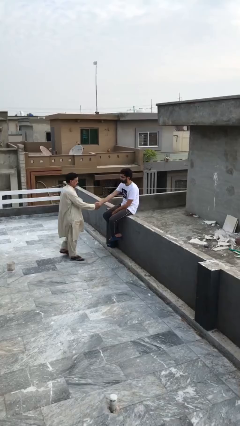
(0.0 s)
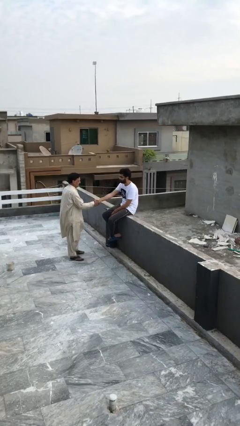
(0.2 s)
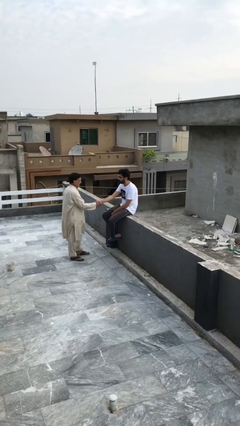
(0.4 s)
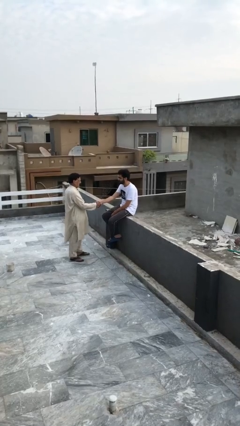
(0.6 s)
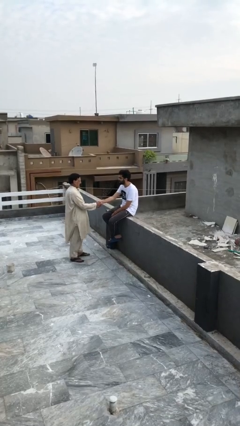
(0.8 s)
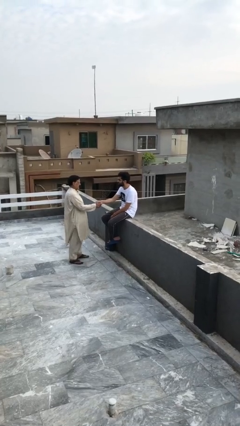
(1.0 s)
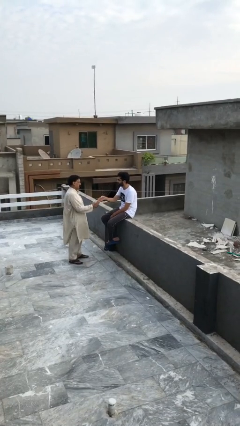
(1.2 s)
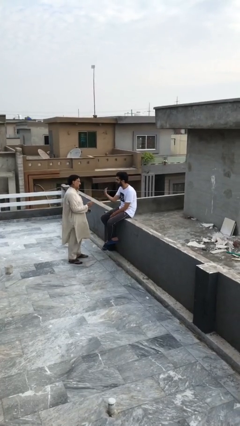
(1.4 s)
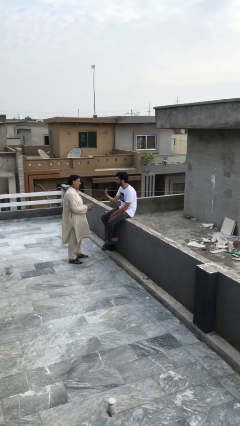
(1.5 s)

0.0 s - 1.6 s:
person shakes hand

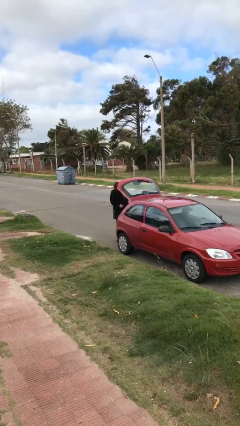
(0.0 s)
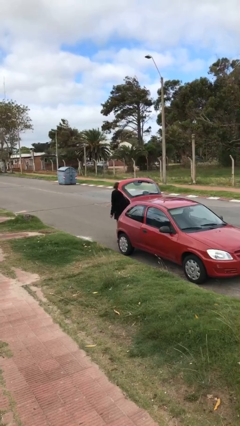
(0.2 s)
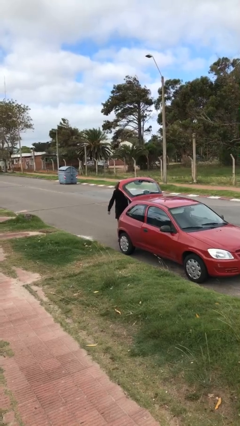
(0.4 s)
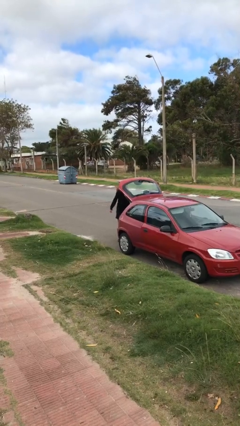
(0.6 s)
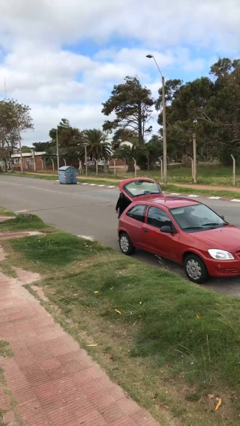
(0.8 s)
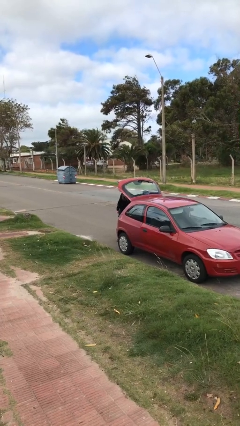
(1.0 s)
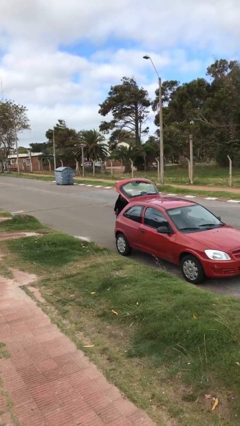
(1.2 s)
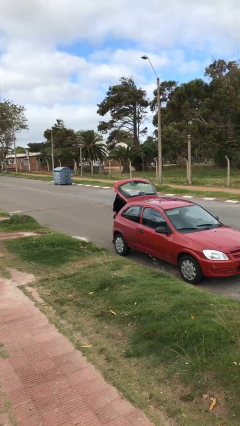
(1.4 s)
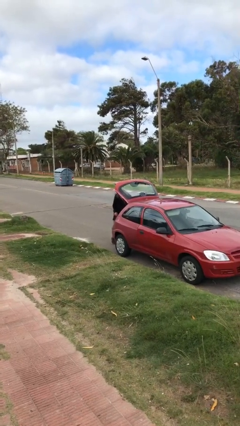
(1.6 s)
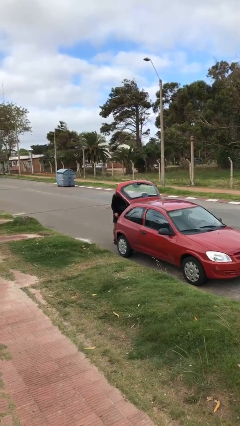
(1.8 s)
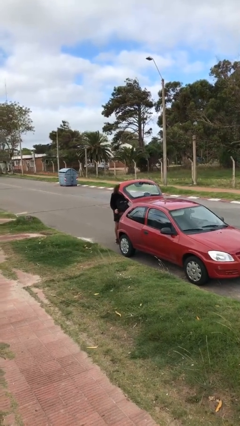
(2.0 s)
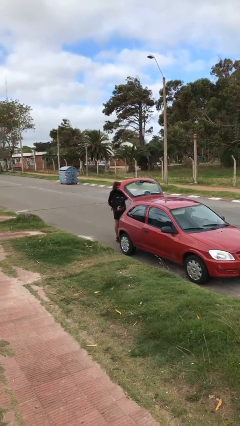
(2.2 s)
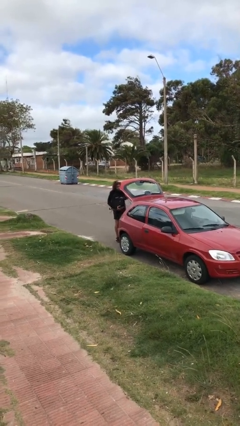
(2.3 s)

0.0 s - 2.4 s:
person unloads car

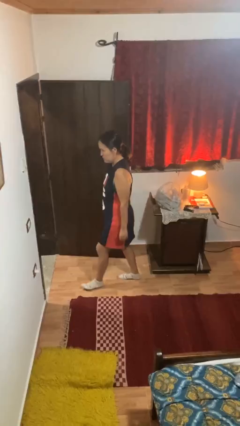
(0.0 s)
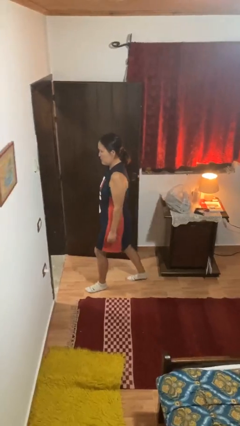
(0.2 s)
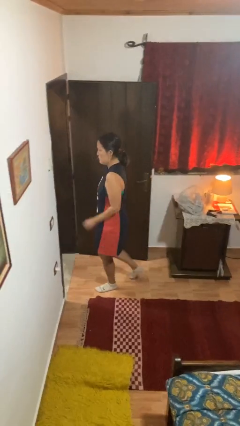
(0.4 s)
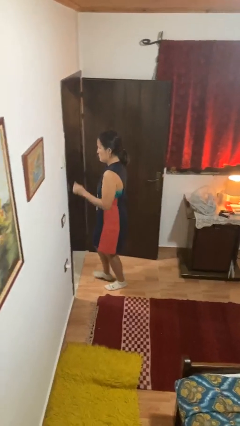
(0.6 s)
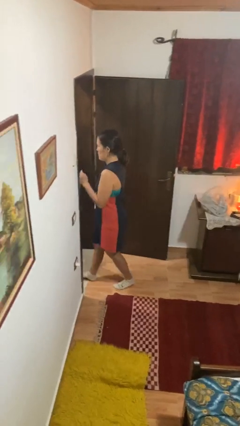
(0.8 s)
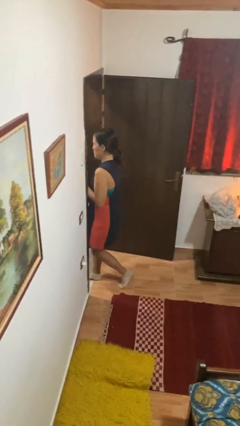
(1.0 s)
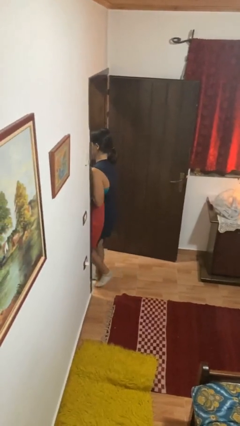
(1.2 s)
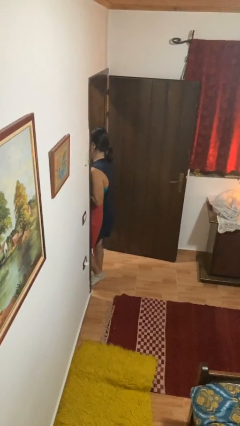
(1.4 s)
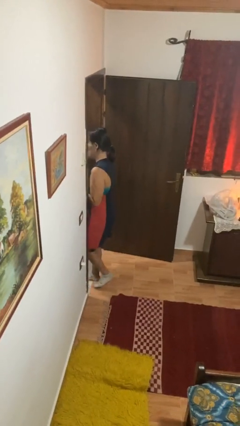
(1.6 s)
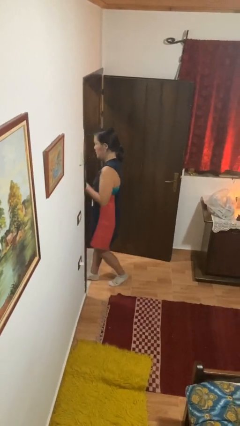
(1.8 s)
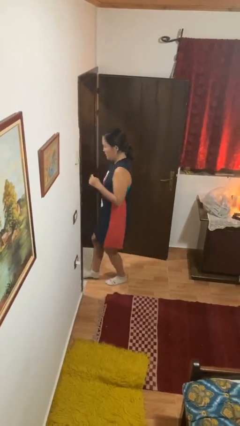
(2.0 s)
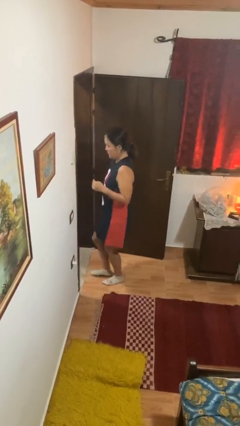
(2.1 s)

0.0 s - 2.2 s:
person bumps into wall

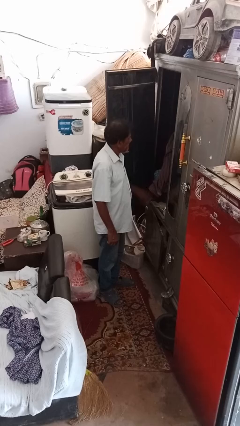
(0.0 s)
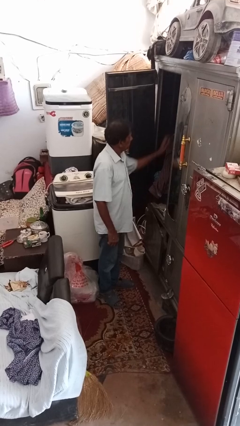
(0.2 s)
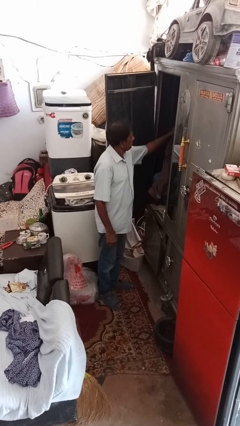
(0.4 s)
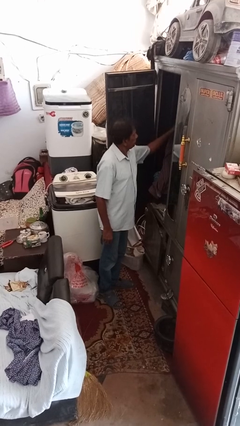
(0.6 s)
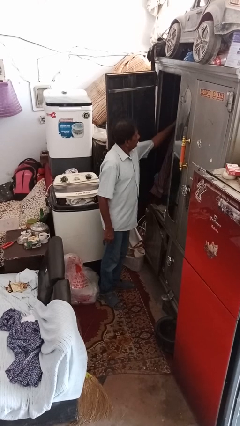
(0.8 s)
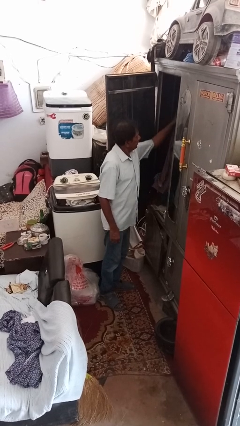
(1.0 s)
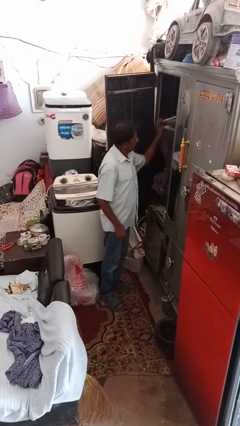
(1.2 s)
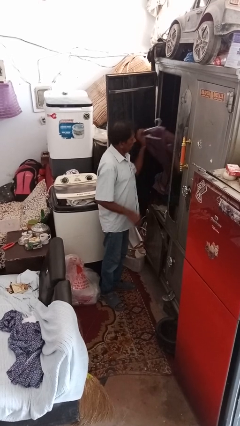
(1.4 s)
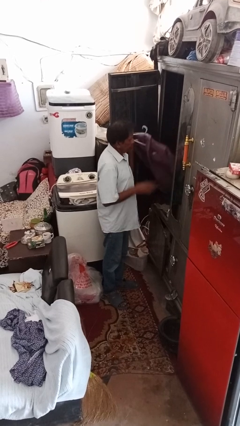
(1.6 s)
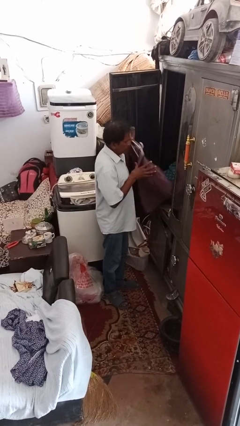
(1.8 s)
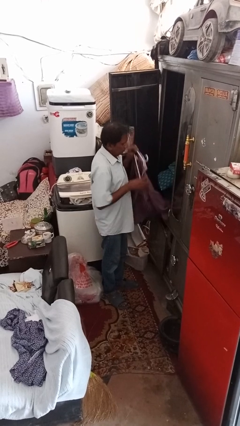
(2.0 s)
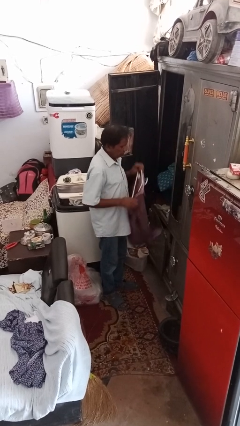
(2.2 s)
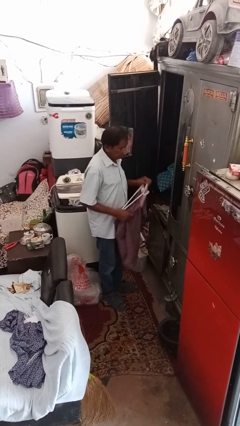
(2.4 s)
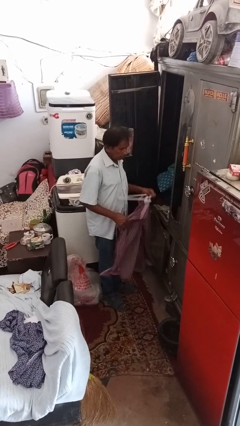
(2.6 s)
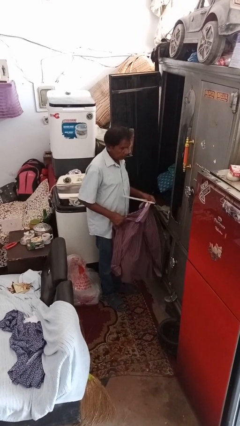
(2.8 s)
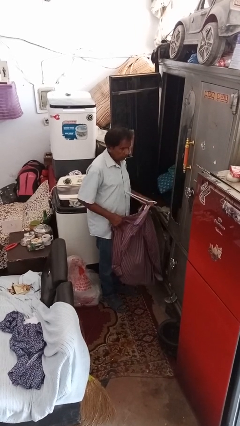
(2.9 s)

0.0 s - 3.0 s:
person takes clothes from closet

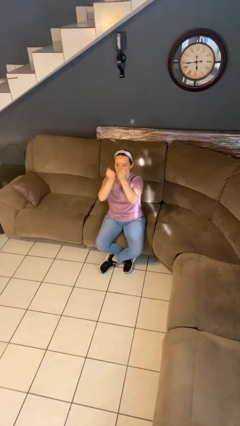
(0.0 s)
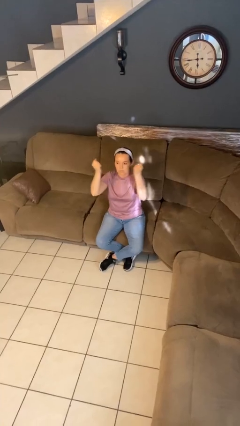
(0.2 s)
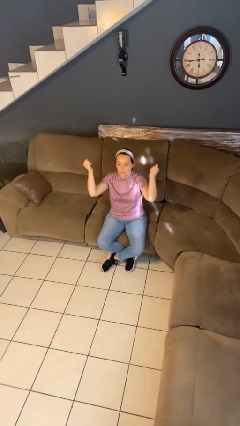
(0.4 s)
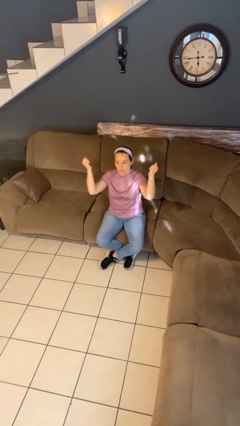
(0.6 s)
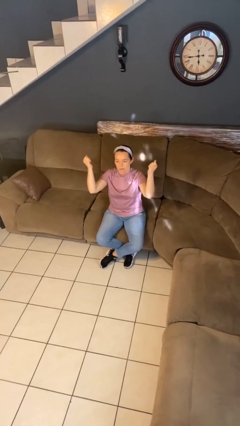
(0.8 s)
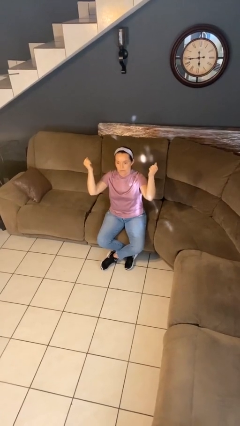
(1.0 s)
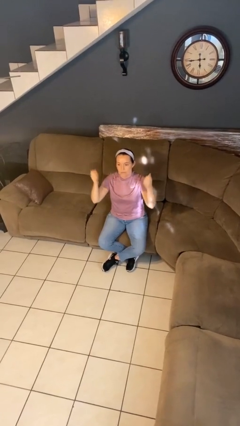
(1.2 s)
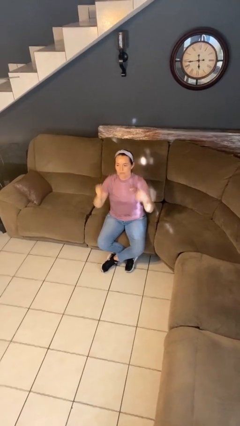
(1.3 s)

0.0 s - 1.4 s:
person gestures zoom out

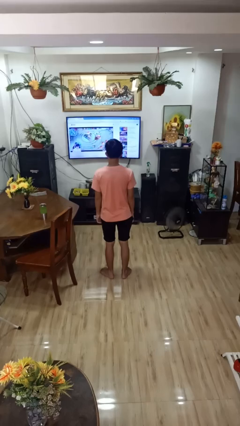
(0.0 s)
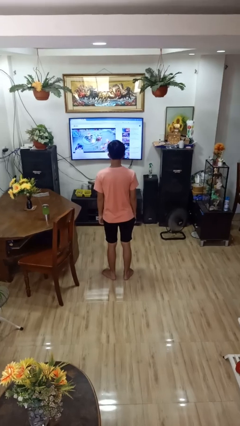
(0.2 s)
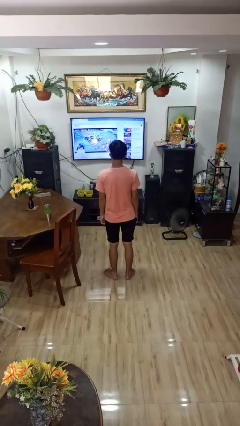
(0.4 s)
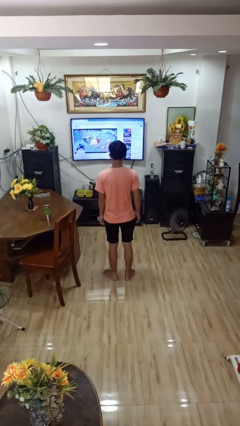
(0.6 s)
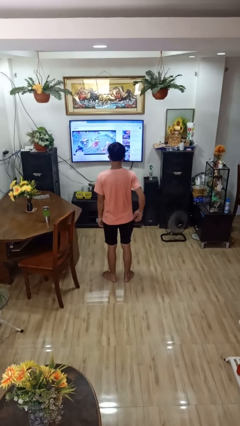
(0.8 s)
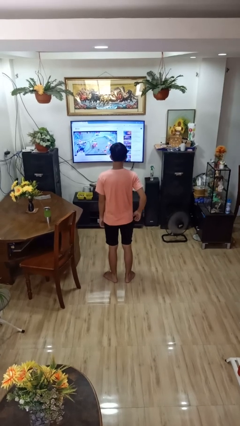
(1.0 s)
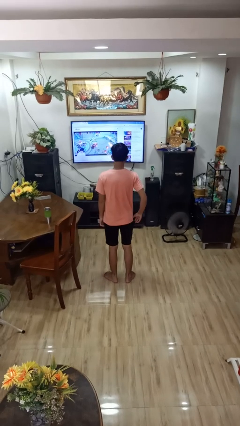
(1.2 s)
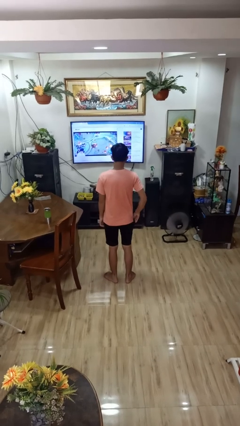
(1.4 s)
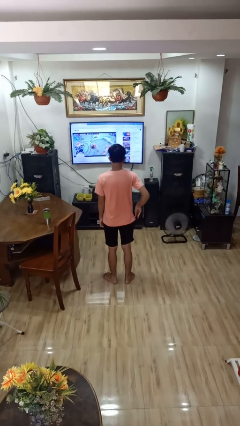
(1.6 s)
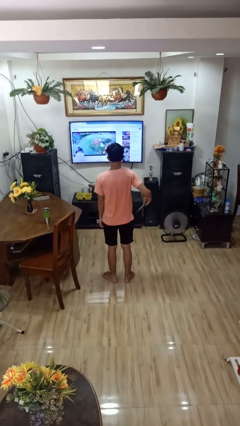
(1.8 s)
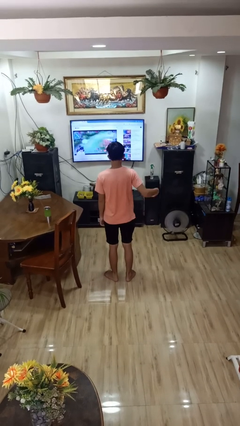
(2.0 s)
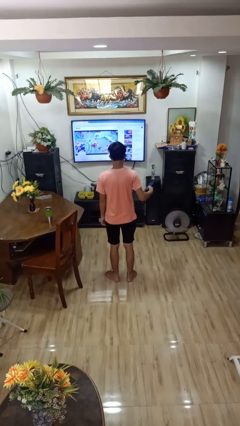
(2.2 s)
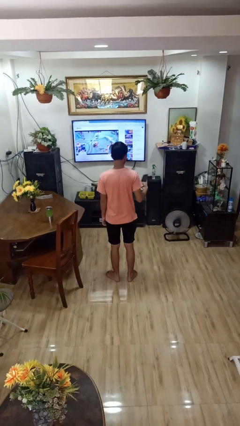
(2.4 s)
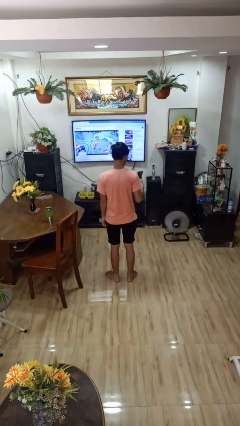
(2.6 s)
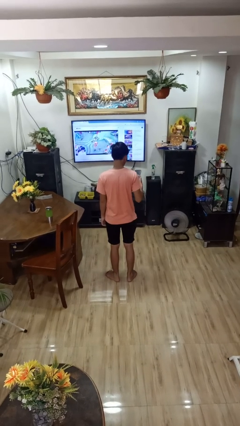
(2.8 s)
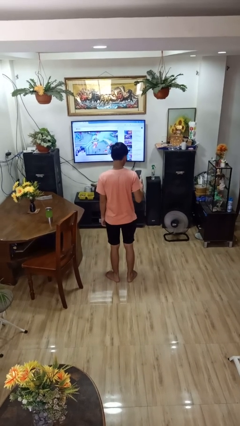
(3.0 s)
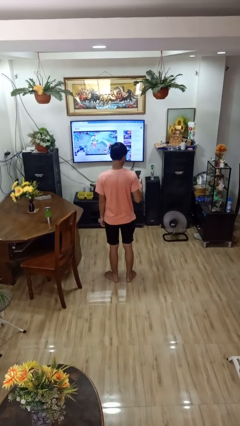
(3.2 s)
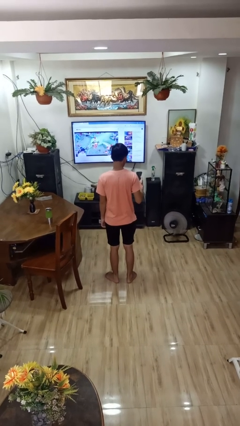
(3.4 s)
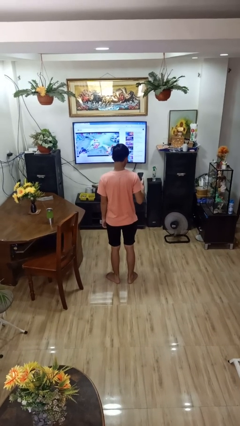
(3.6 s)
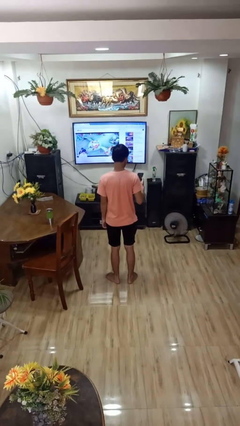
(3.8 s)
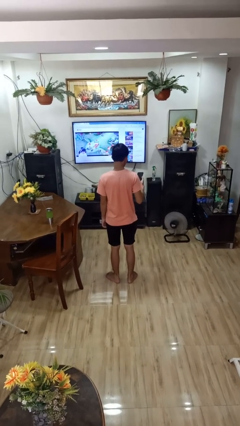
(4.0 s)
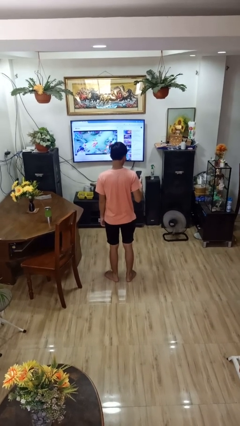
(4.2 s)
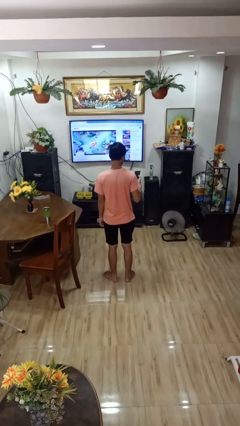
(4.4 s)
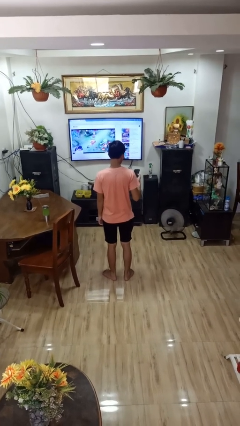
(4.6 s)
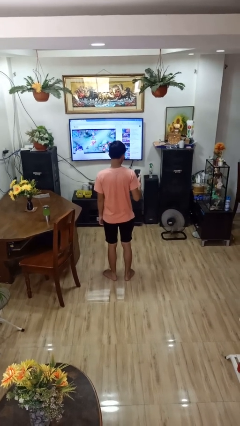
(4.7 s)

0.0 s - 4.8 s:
person takes phone from pocket

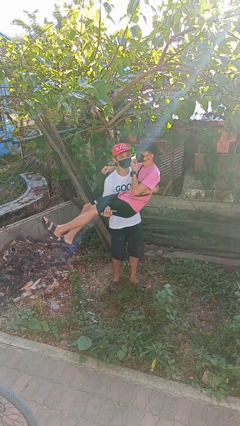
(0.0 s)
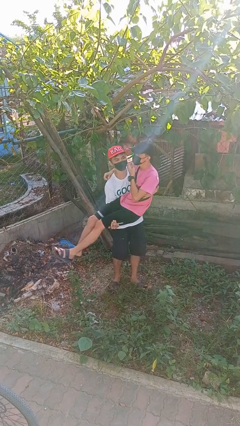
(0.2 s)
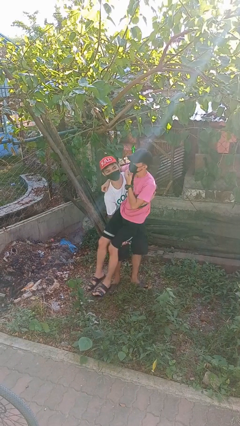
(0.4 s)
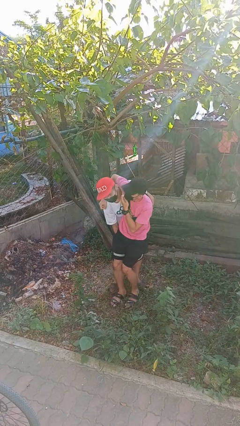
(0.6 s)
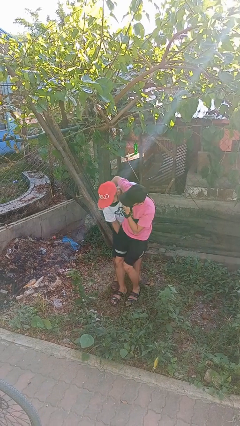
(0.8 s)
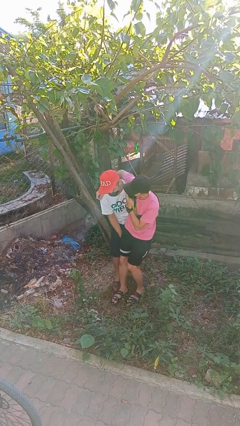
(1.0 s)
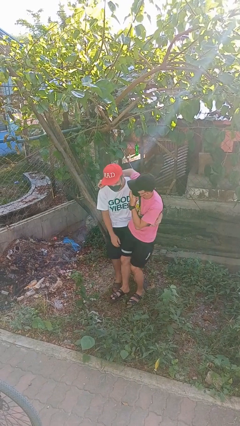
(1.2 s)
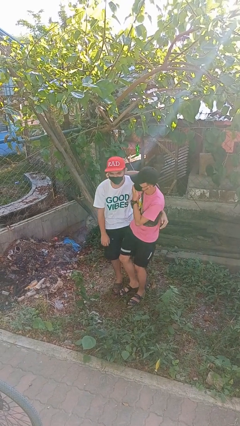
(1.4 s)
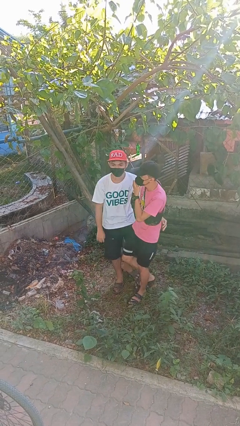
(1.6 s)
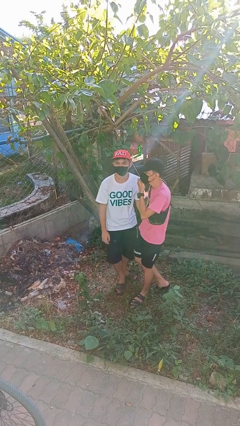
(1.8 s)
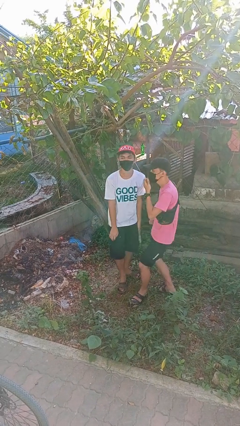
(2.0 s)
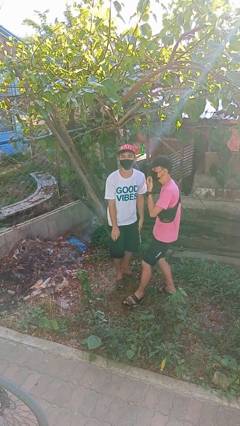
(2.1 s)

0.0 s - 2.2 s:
person puts down person
